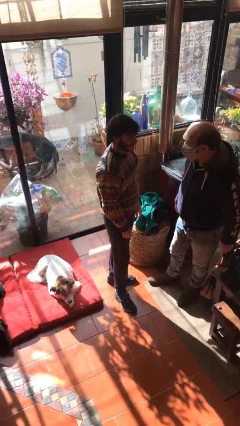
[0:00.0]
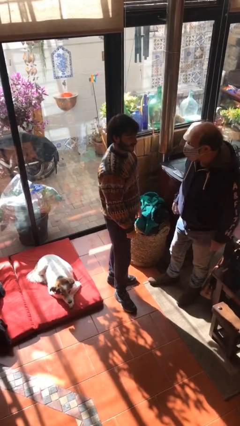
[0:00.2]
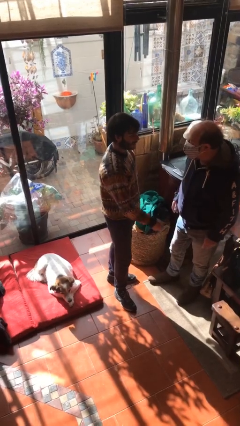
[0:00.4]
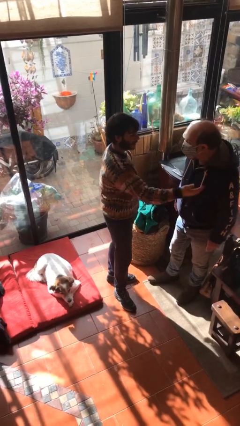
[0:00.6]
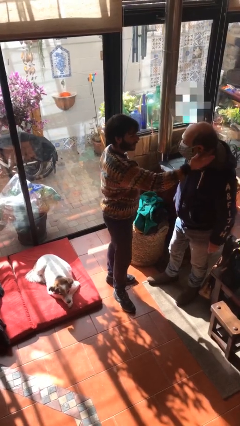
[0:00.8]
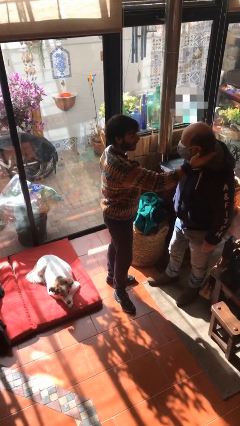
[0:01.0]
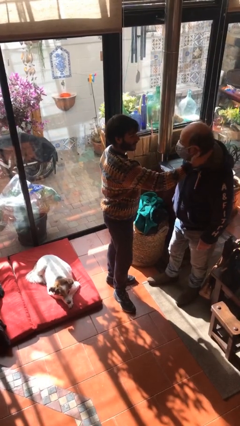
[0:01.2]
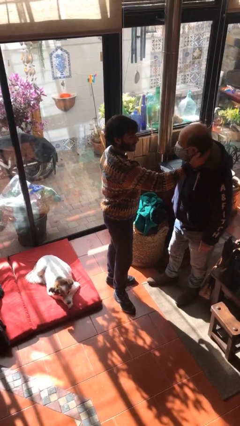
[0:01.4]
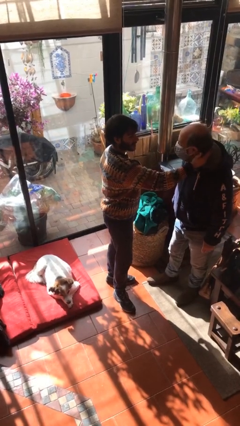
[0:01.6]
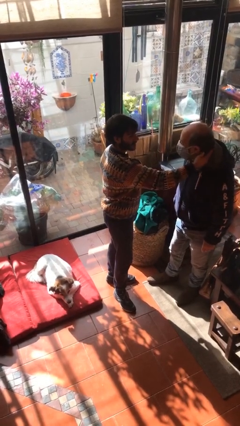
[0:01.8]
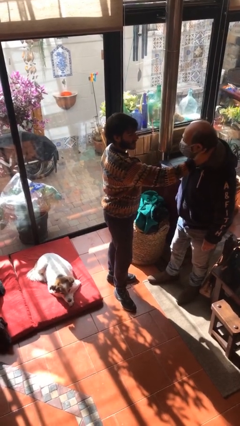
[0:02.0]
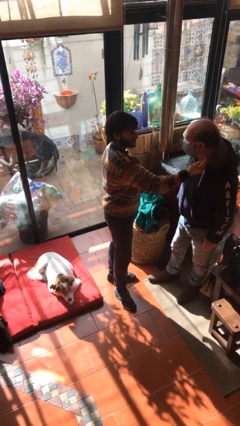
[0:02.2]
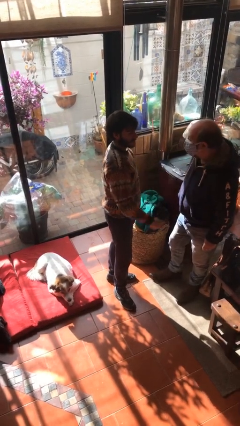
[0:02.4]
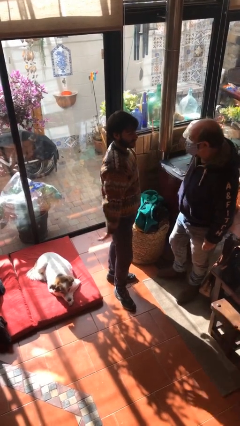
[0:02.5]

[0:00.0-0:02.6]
person touches face of person

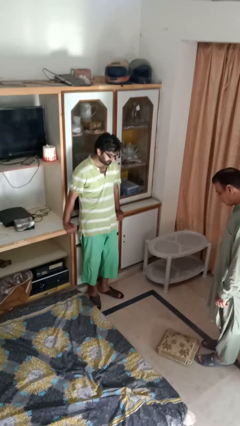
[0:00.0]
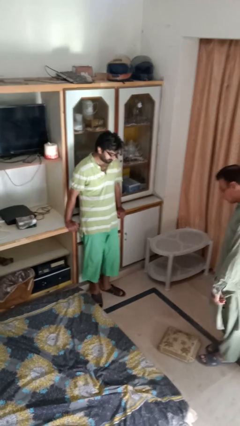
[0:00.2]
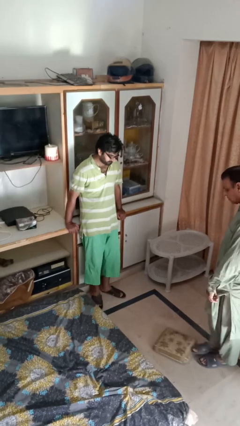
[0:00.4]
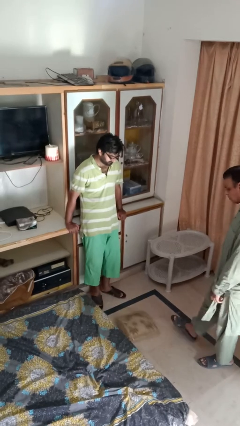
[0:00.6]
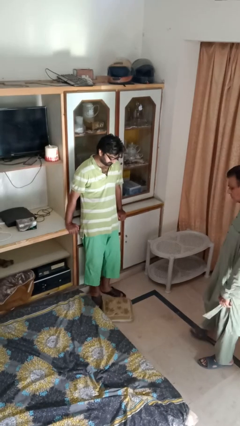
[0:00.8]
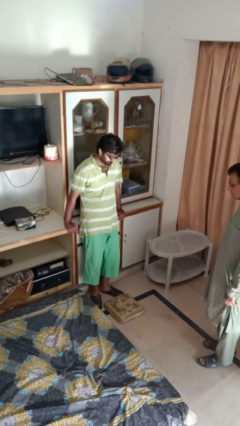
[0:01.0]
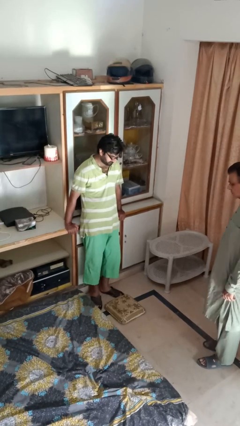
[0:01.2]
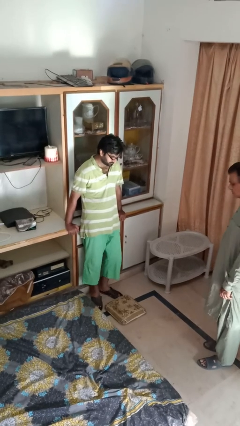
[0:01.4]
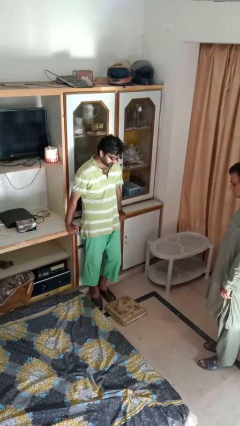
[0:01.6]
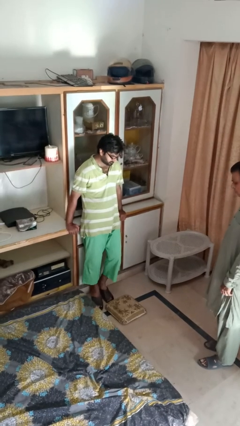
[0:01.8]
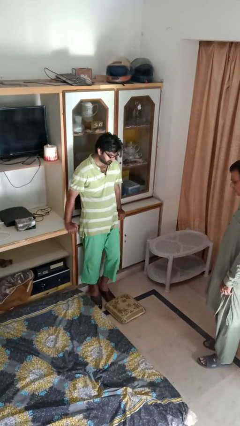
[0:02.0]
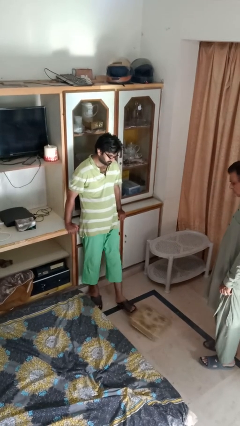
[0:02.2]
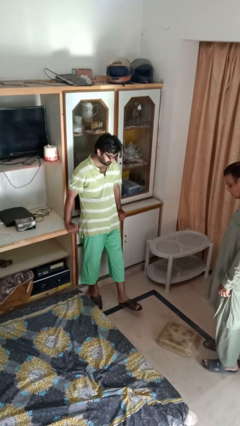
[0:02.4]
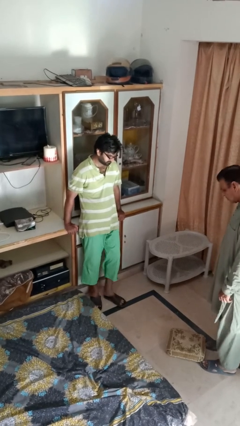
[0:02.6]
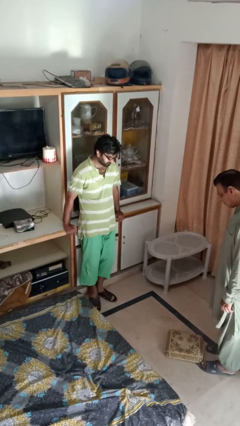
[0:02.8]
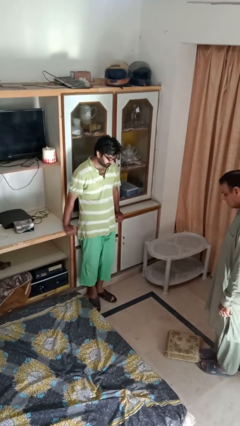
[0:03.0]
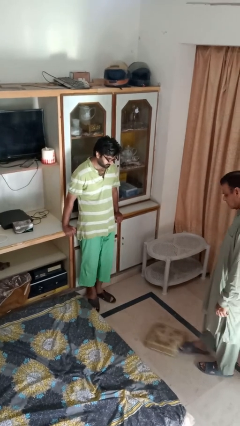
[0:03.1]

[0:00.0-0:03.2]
person kicks object to person

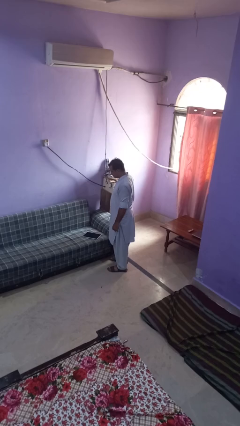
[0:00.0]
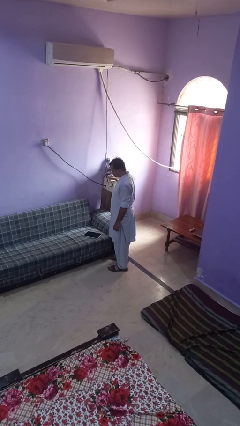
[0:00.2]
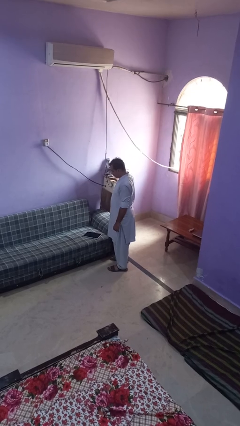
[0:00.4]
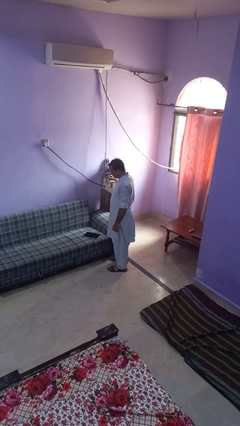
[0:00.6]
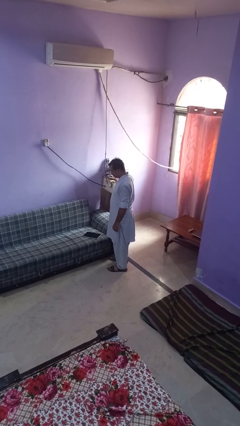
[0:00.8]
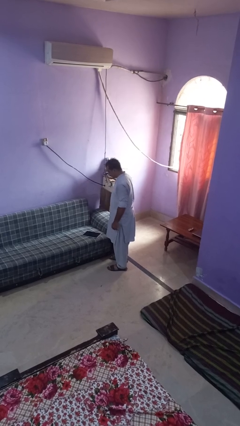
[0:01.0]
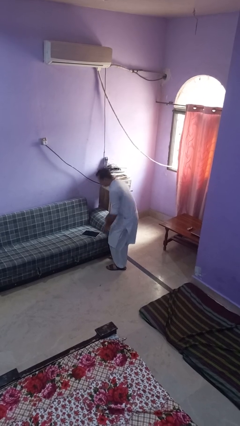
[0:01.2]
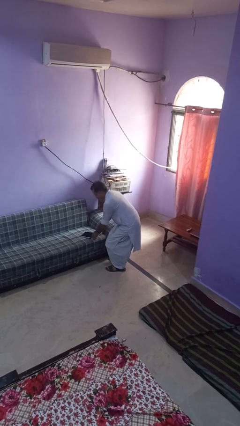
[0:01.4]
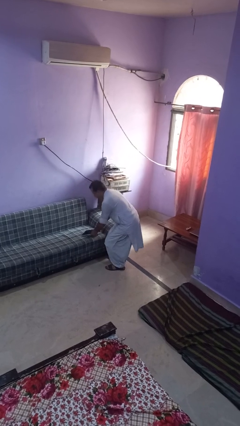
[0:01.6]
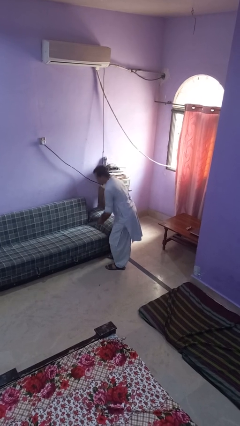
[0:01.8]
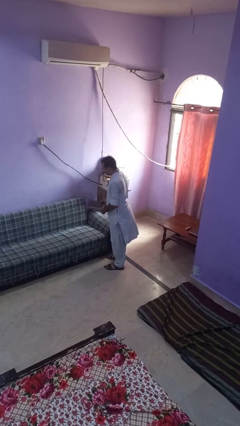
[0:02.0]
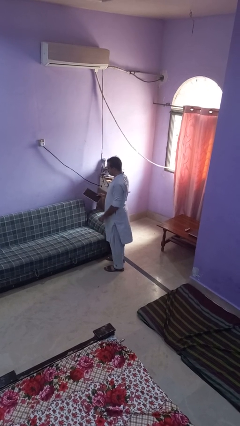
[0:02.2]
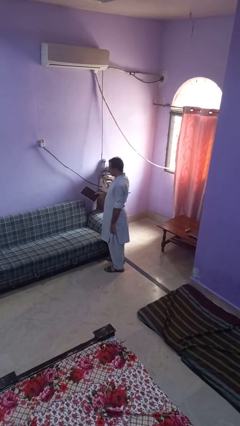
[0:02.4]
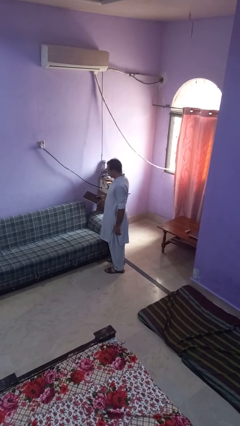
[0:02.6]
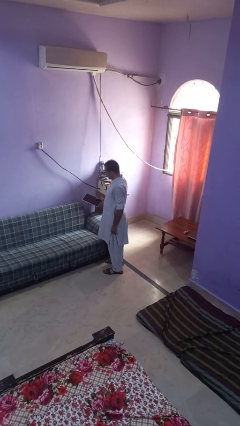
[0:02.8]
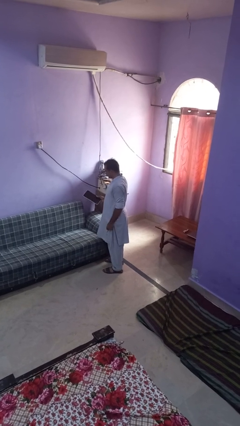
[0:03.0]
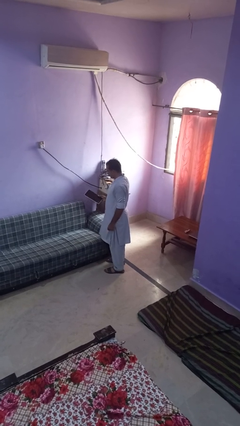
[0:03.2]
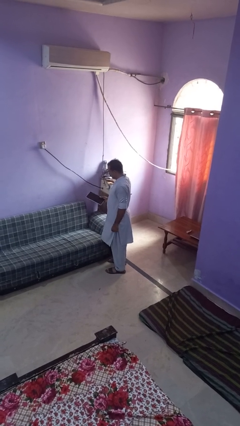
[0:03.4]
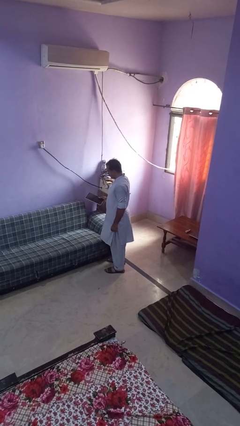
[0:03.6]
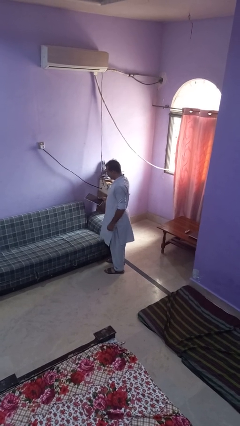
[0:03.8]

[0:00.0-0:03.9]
person picks up object from couch

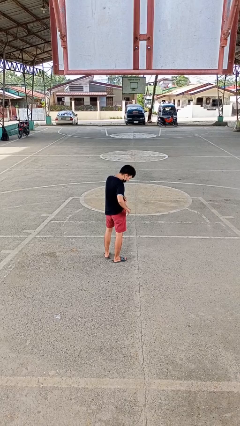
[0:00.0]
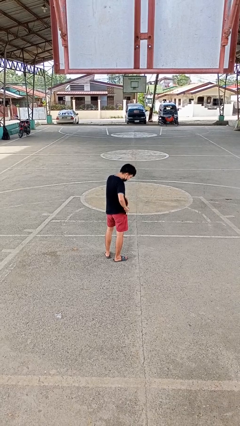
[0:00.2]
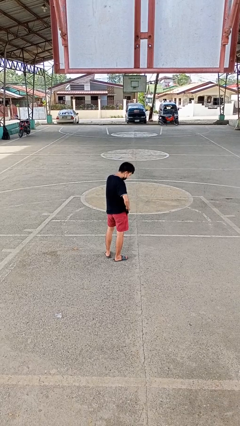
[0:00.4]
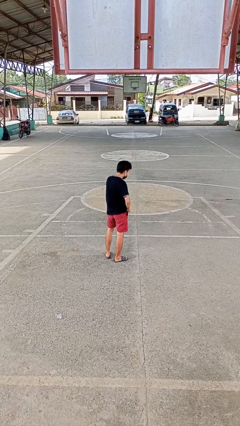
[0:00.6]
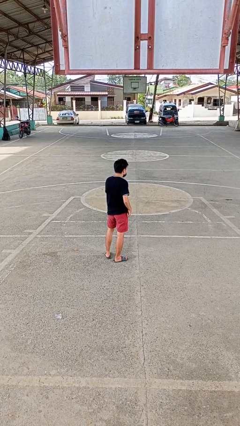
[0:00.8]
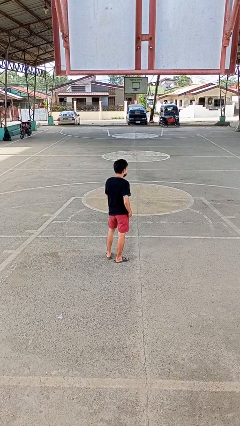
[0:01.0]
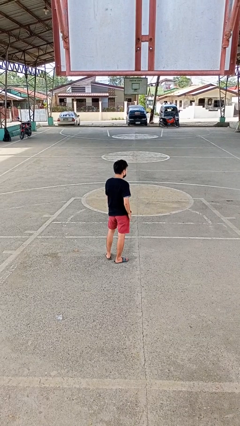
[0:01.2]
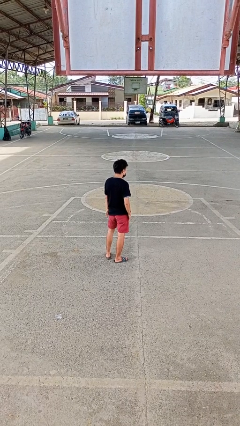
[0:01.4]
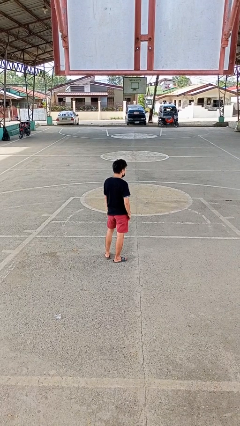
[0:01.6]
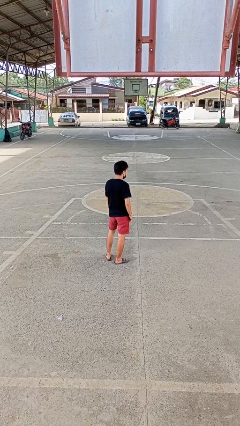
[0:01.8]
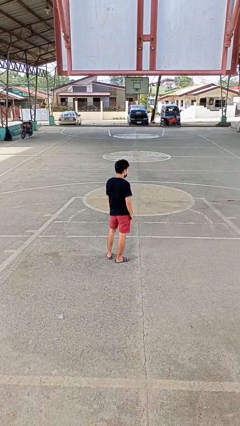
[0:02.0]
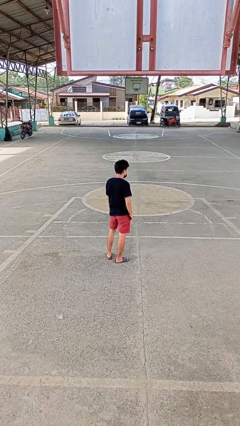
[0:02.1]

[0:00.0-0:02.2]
person puts phone into pocket

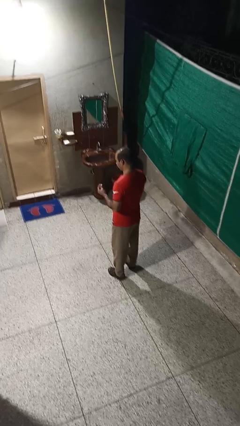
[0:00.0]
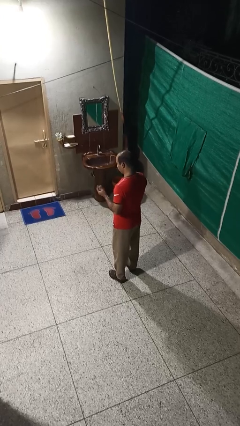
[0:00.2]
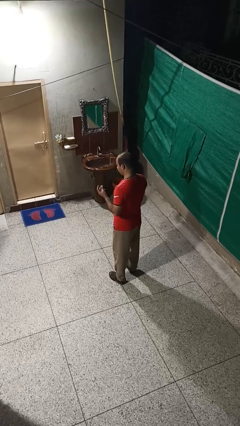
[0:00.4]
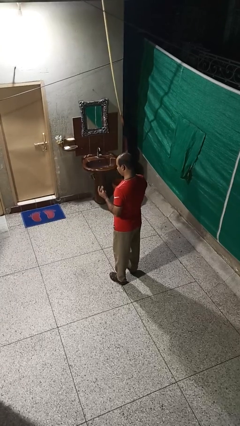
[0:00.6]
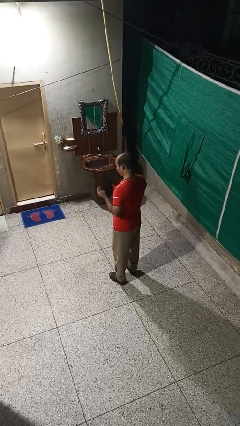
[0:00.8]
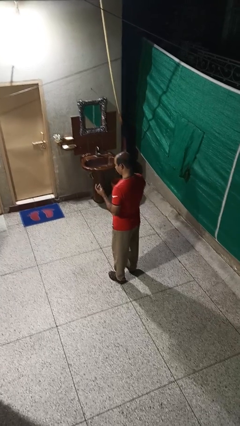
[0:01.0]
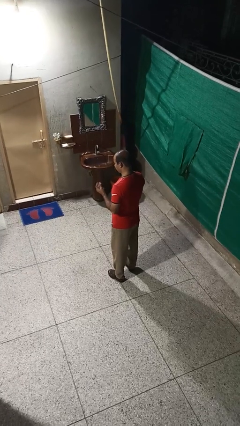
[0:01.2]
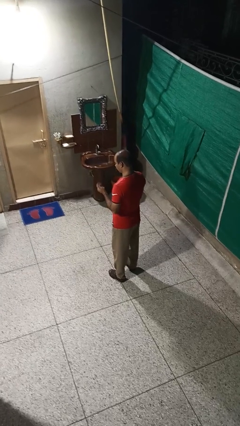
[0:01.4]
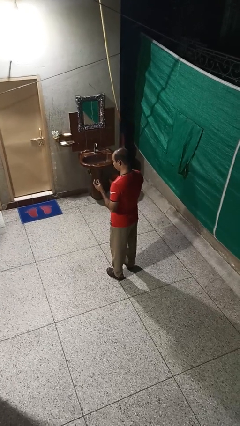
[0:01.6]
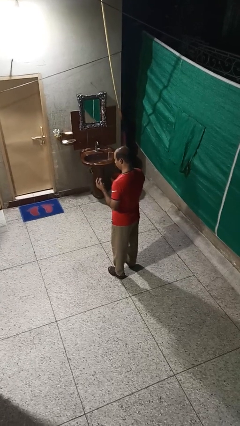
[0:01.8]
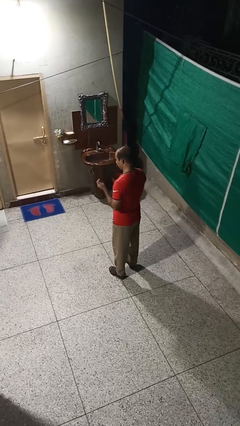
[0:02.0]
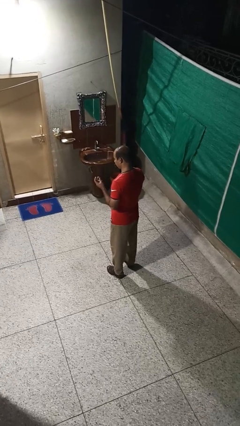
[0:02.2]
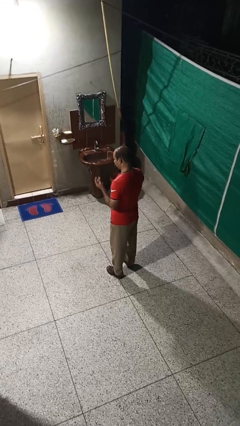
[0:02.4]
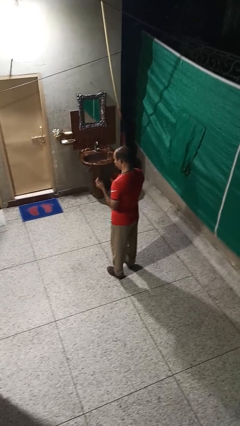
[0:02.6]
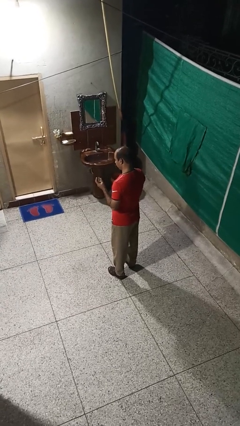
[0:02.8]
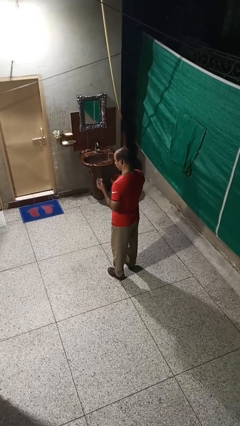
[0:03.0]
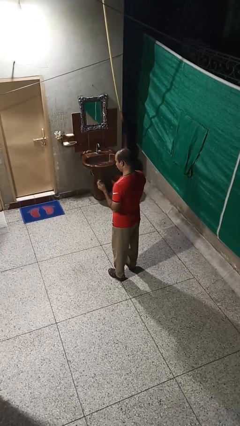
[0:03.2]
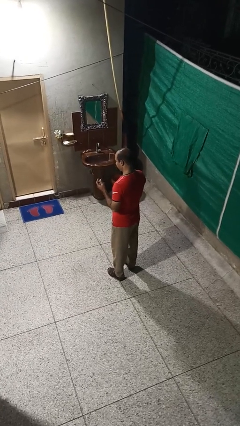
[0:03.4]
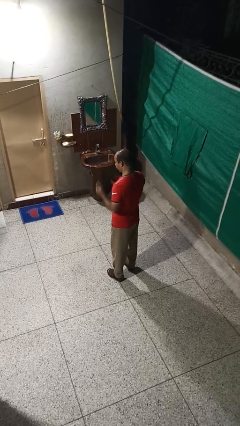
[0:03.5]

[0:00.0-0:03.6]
person snaps fingers

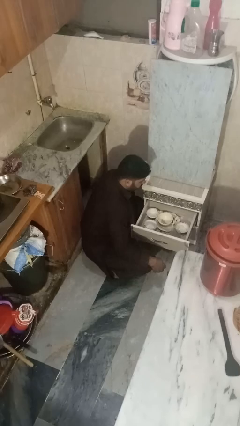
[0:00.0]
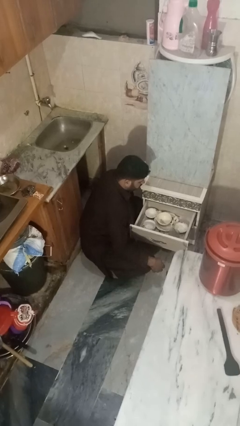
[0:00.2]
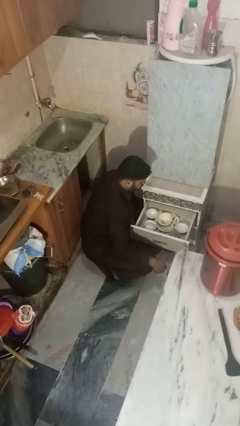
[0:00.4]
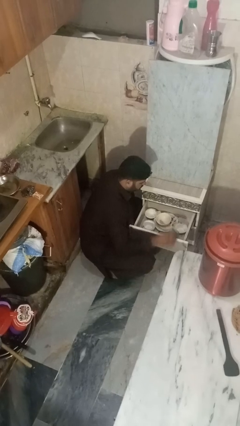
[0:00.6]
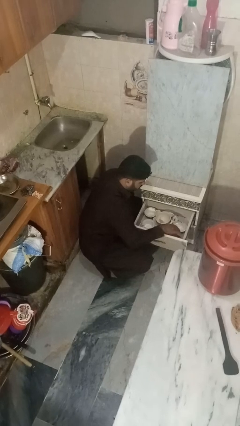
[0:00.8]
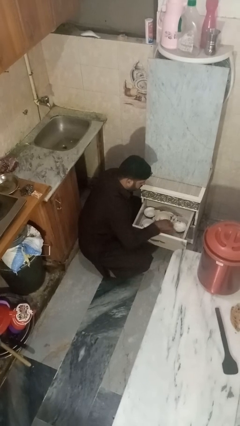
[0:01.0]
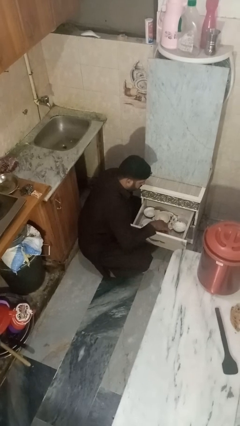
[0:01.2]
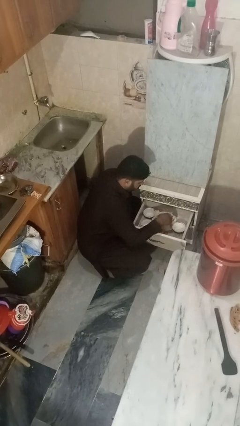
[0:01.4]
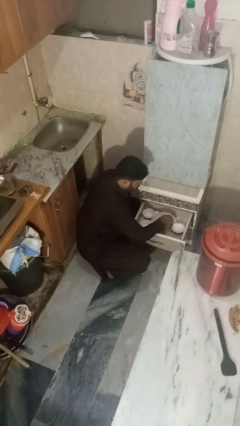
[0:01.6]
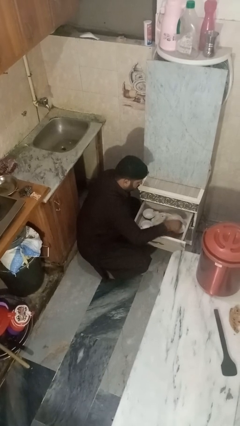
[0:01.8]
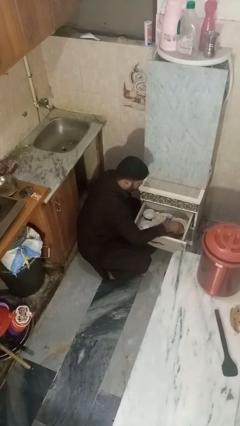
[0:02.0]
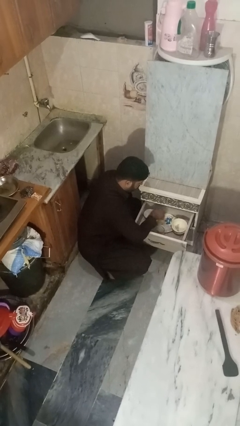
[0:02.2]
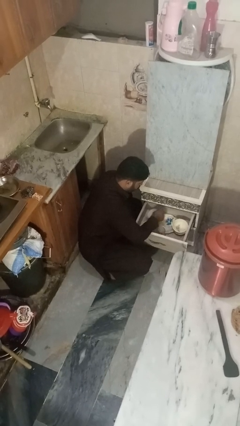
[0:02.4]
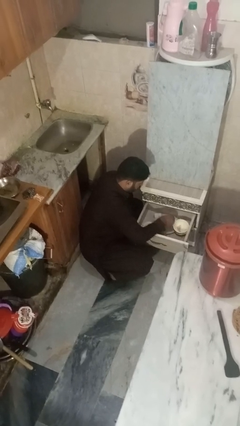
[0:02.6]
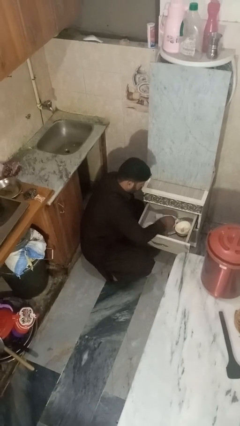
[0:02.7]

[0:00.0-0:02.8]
person searches in kitchen drawer
